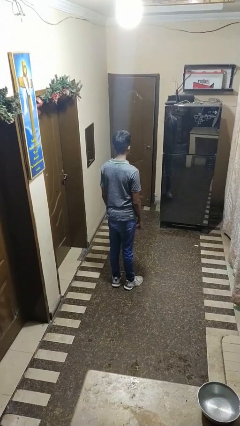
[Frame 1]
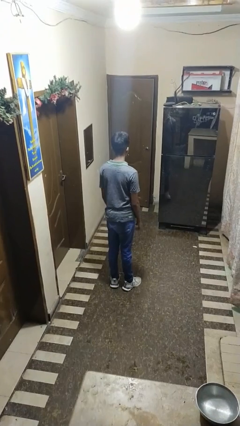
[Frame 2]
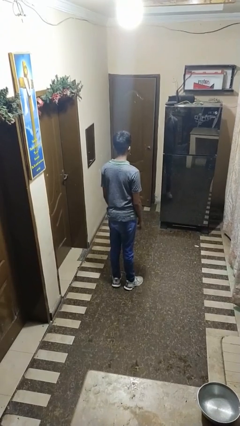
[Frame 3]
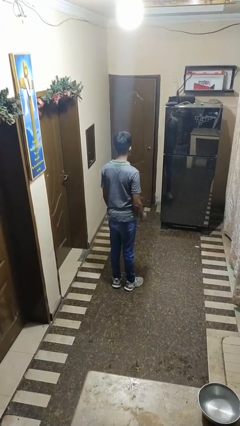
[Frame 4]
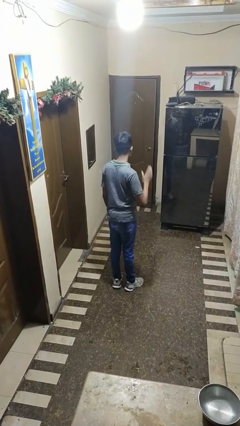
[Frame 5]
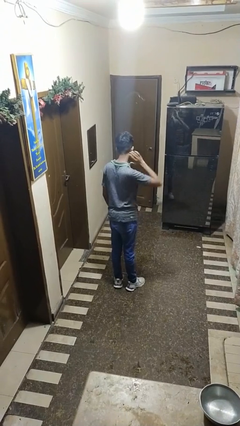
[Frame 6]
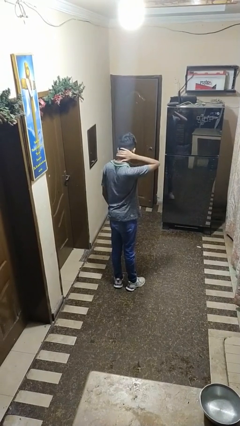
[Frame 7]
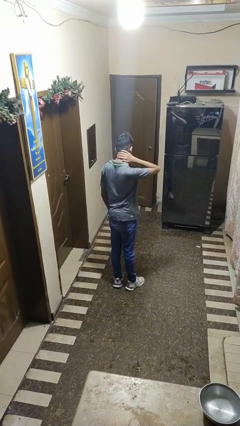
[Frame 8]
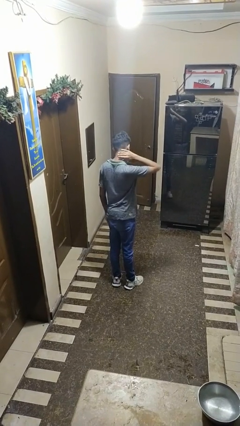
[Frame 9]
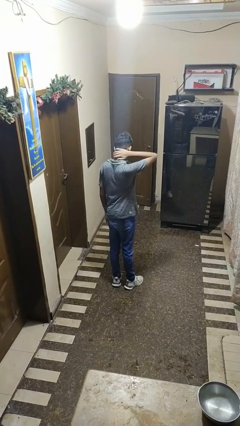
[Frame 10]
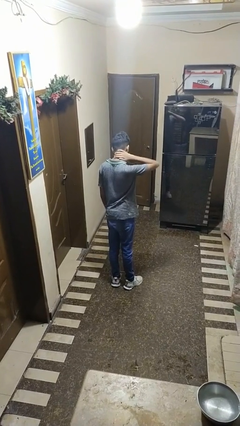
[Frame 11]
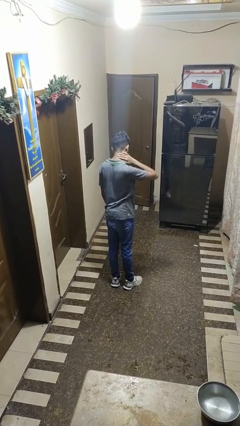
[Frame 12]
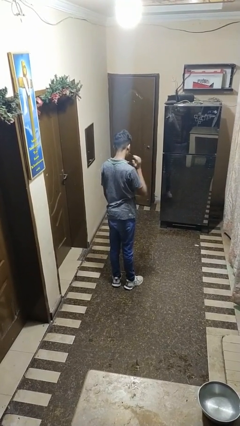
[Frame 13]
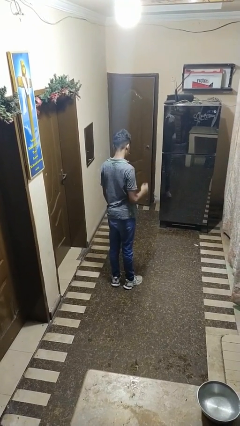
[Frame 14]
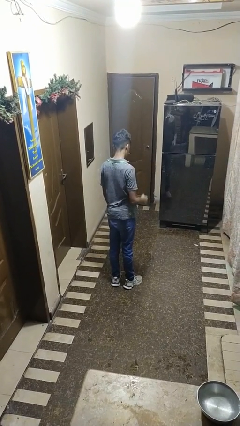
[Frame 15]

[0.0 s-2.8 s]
person rubs neck

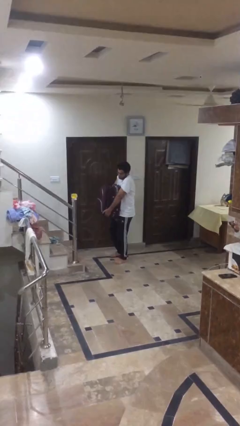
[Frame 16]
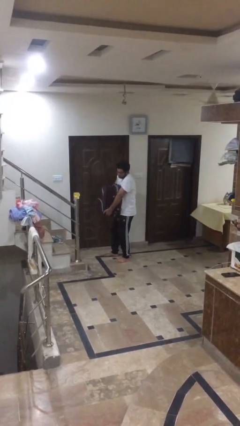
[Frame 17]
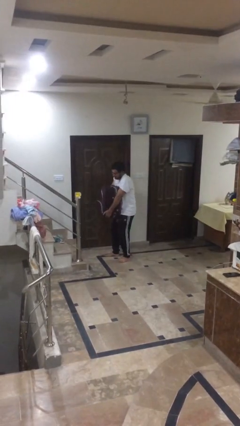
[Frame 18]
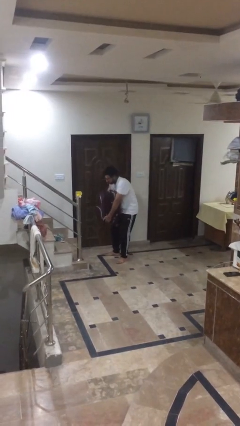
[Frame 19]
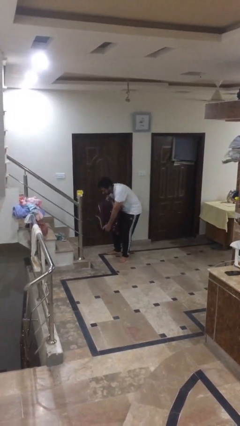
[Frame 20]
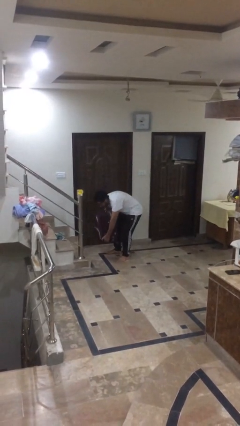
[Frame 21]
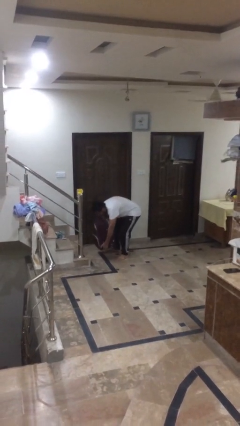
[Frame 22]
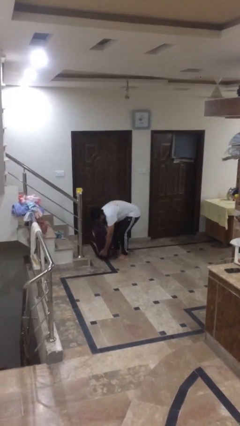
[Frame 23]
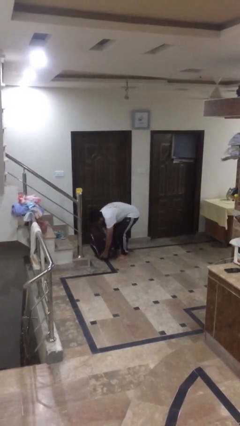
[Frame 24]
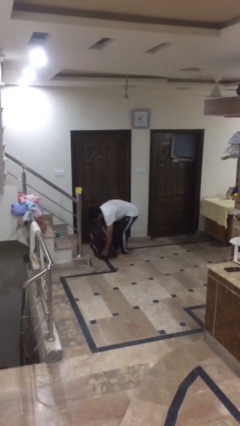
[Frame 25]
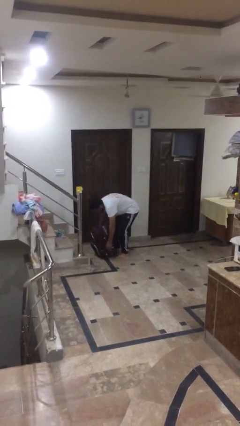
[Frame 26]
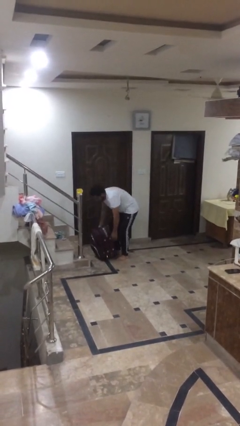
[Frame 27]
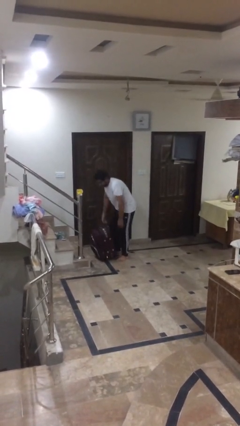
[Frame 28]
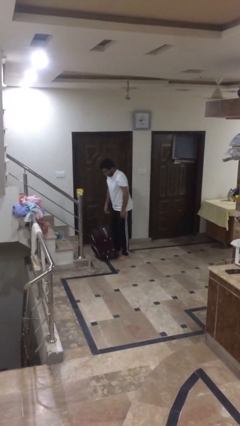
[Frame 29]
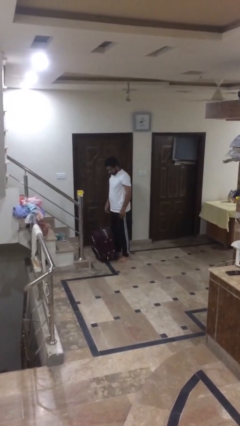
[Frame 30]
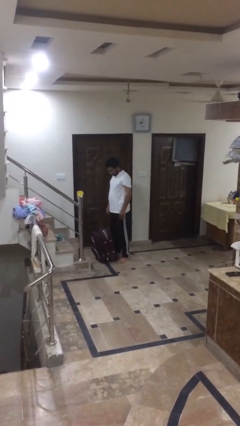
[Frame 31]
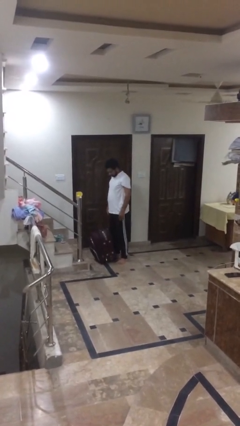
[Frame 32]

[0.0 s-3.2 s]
person puts down object on floor

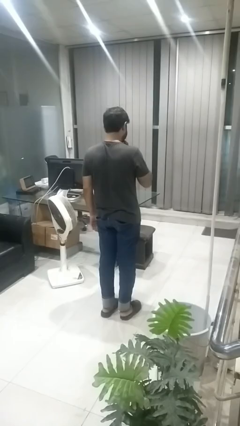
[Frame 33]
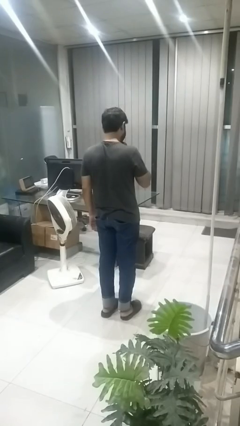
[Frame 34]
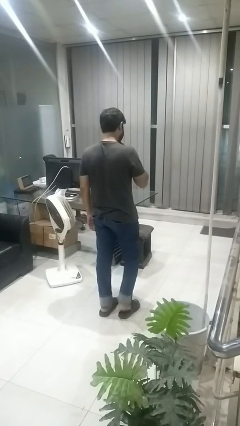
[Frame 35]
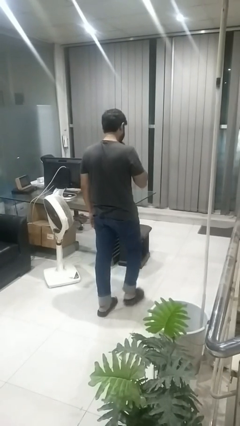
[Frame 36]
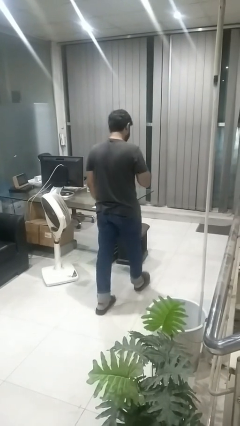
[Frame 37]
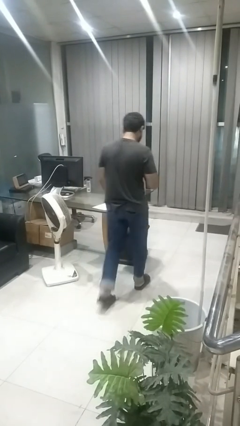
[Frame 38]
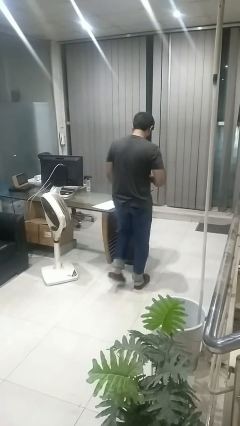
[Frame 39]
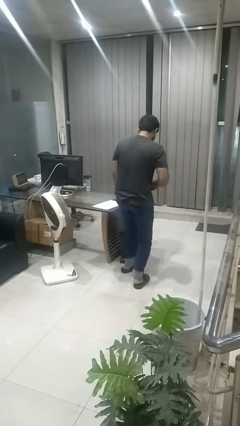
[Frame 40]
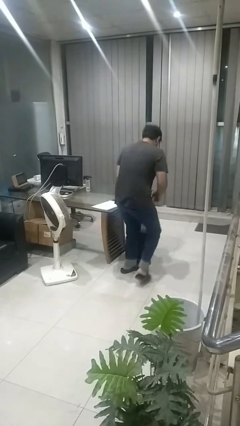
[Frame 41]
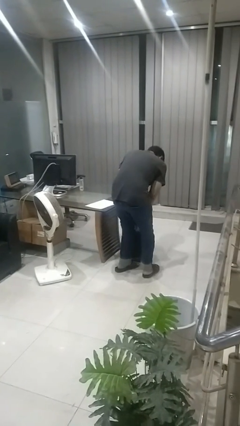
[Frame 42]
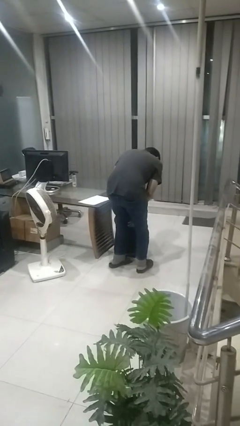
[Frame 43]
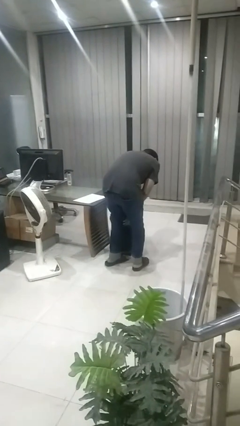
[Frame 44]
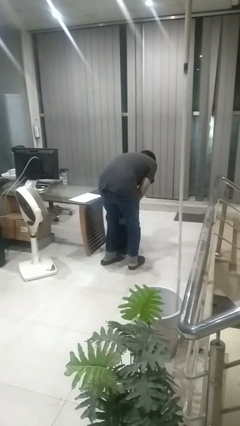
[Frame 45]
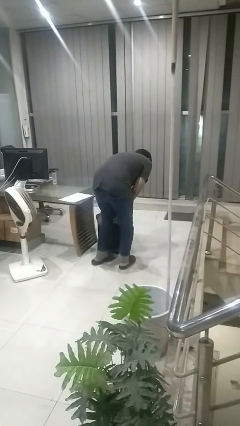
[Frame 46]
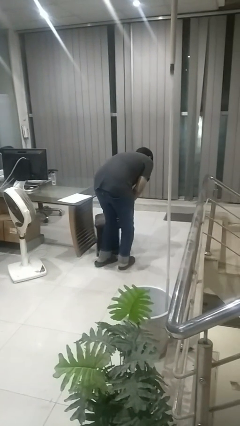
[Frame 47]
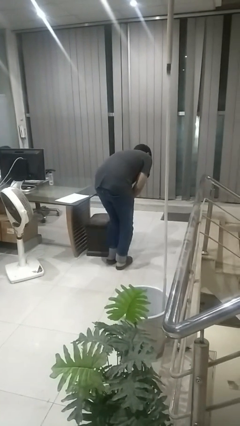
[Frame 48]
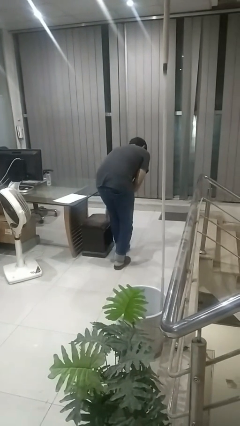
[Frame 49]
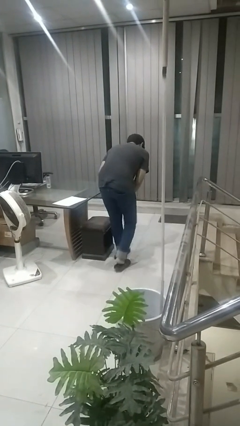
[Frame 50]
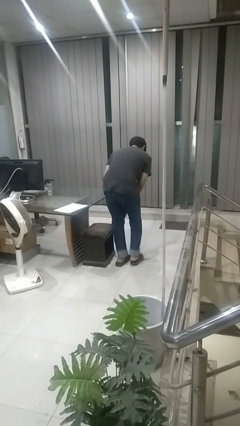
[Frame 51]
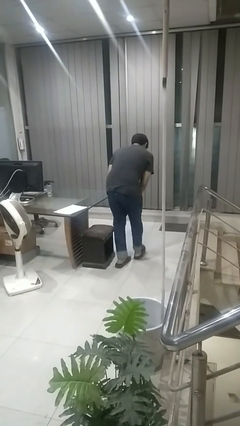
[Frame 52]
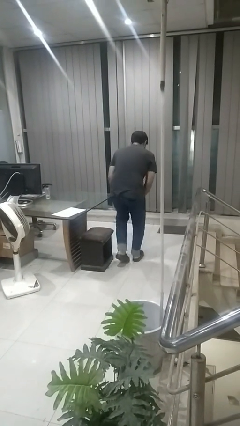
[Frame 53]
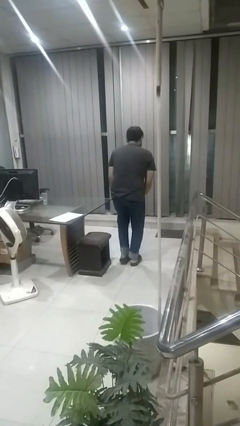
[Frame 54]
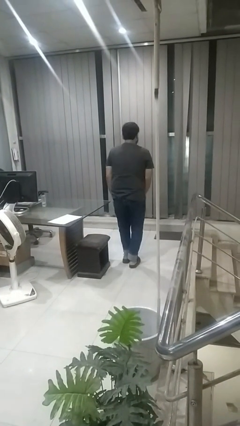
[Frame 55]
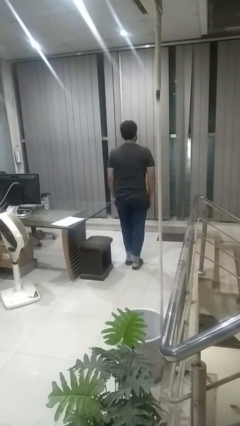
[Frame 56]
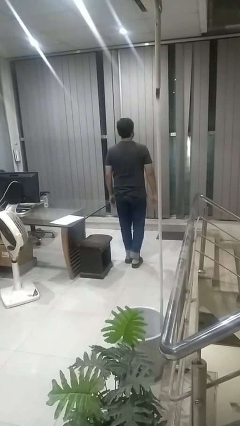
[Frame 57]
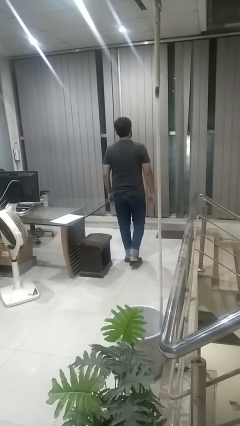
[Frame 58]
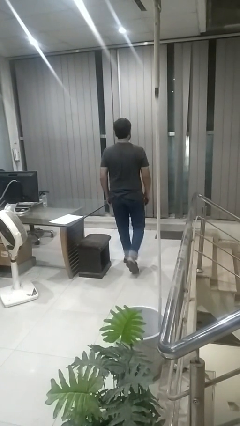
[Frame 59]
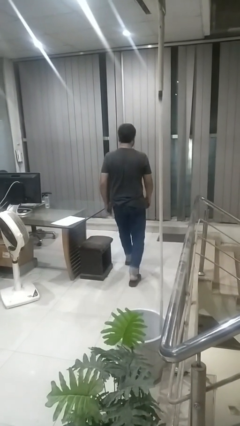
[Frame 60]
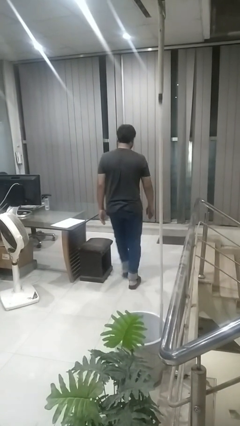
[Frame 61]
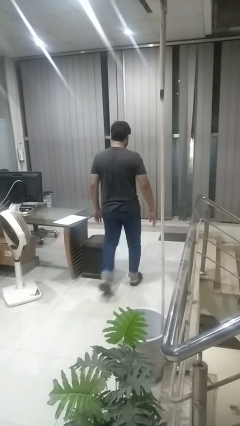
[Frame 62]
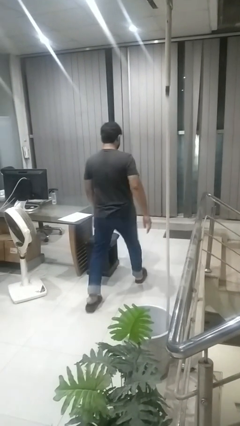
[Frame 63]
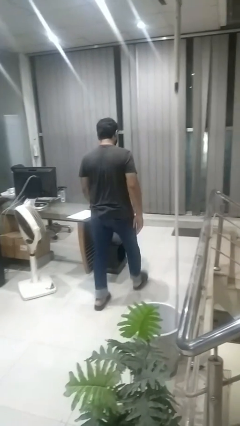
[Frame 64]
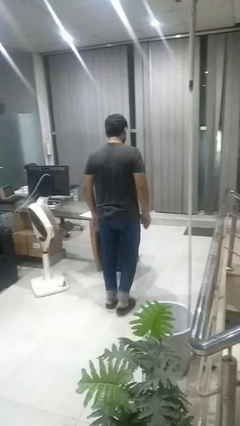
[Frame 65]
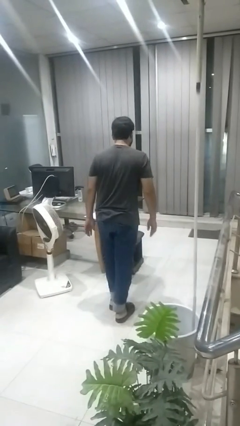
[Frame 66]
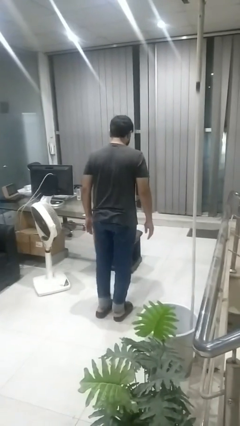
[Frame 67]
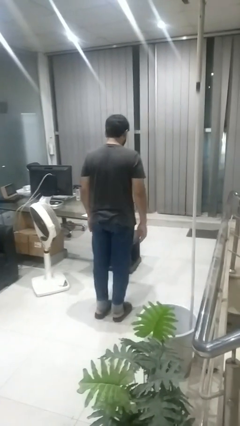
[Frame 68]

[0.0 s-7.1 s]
person bumps into table

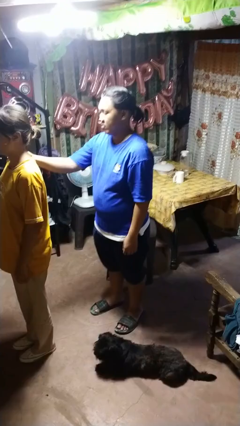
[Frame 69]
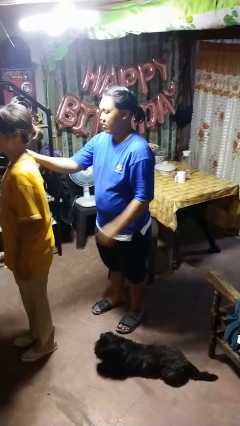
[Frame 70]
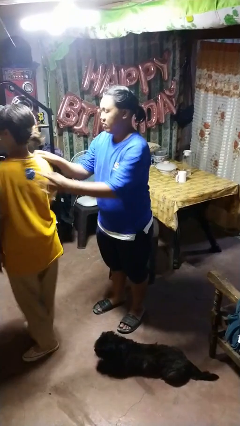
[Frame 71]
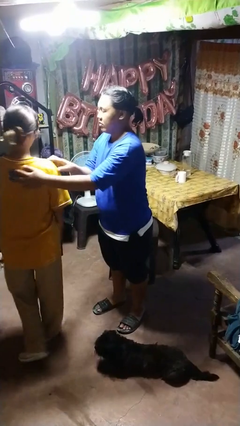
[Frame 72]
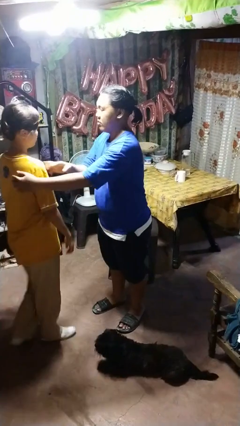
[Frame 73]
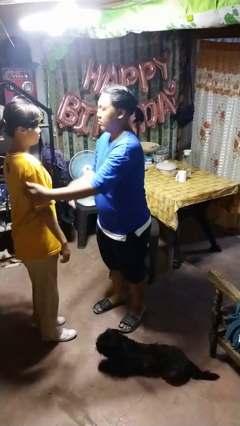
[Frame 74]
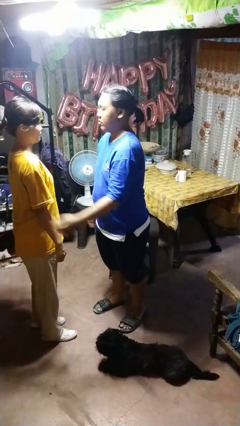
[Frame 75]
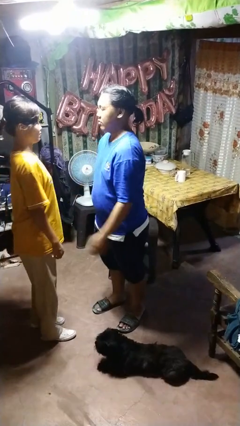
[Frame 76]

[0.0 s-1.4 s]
person spins person around

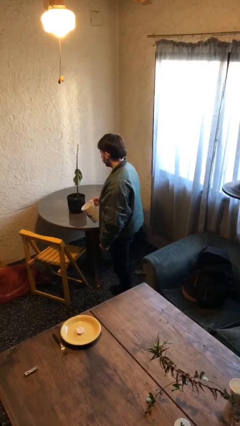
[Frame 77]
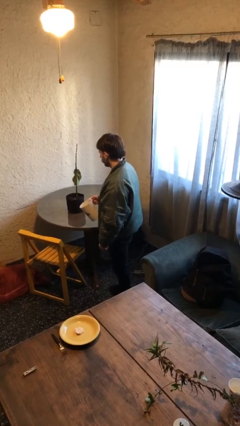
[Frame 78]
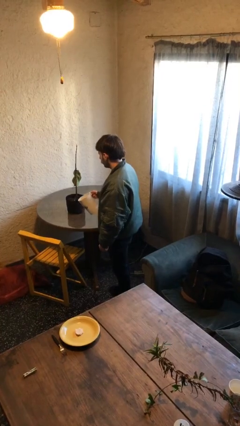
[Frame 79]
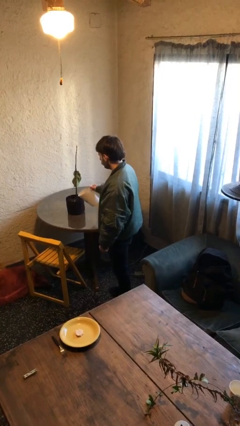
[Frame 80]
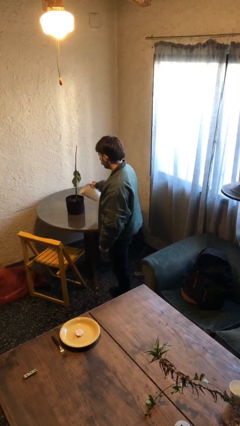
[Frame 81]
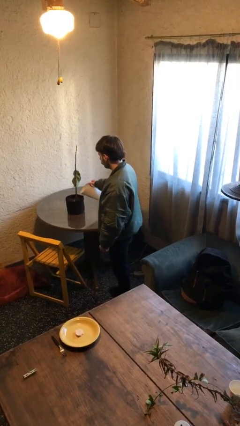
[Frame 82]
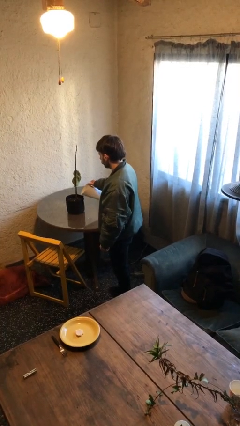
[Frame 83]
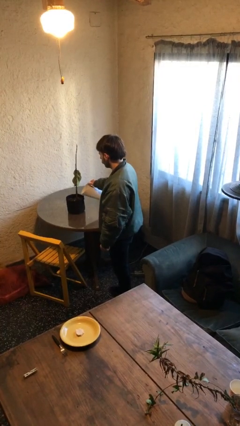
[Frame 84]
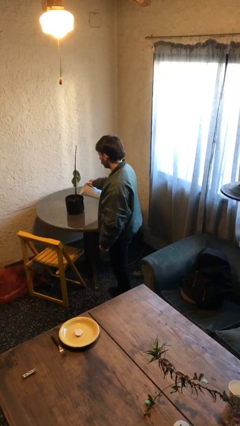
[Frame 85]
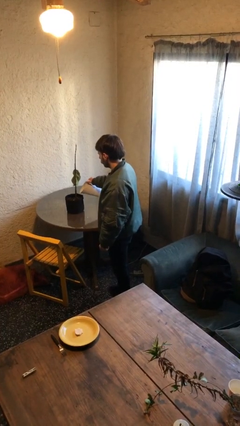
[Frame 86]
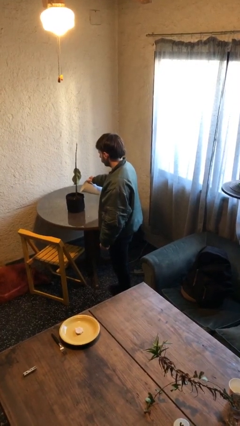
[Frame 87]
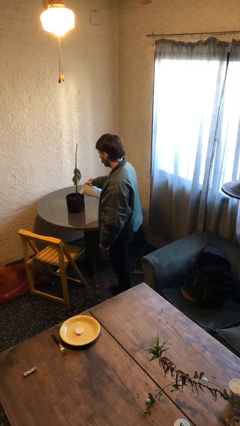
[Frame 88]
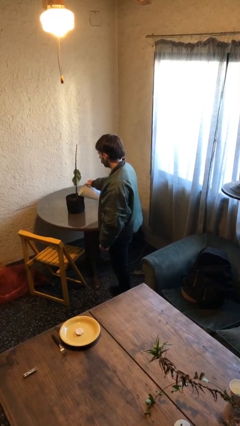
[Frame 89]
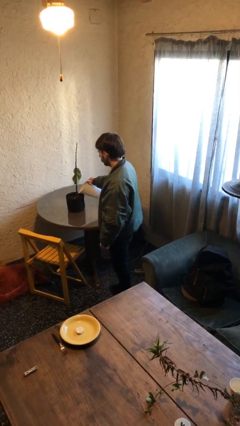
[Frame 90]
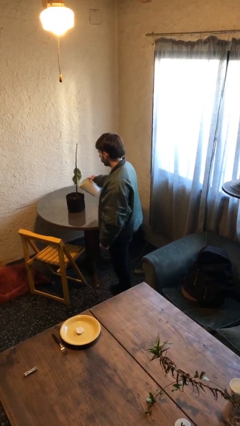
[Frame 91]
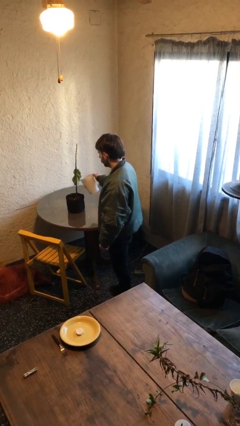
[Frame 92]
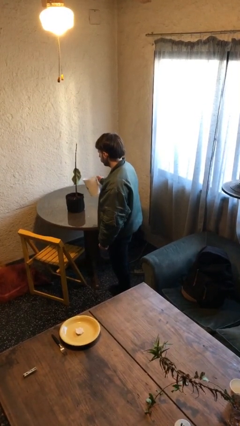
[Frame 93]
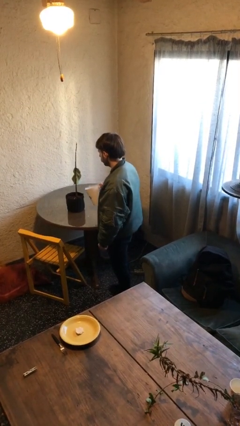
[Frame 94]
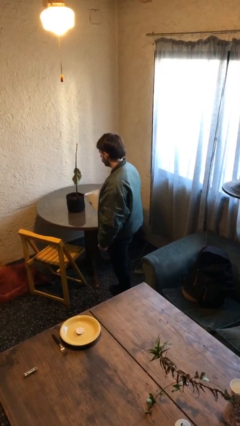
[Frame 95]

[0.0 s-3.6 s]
person waters houseplant
